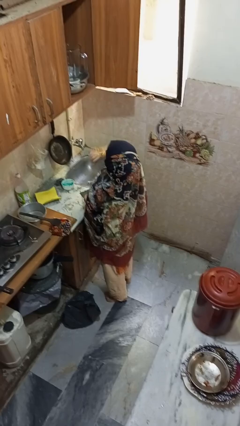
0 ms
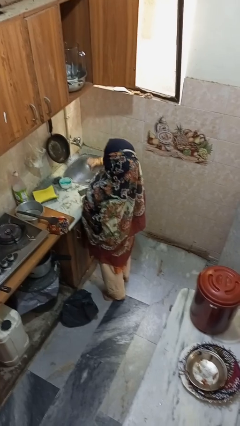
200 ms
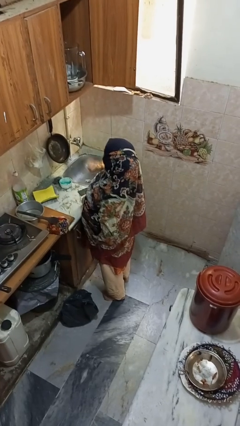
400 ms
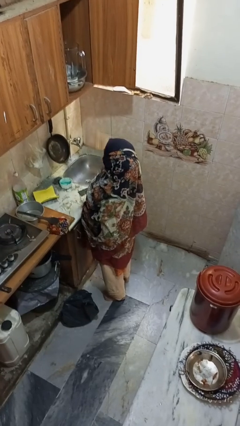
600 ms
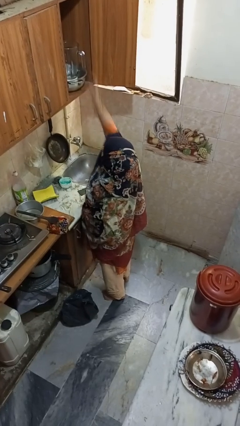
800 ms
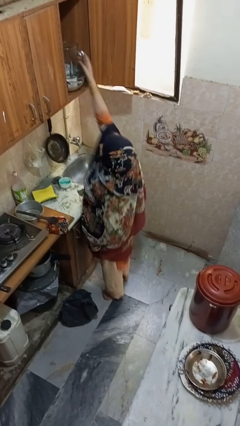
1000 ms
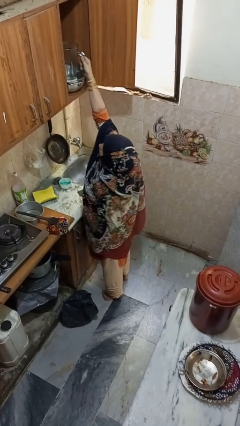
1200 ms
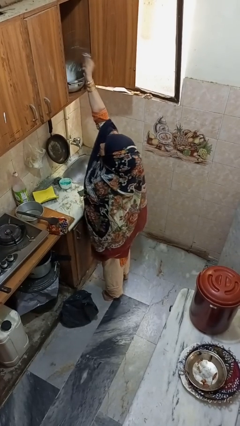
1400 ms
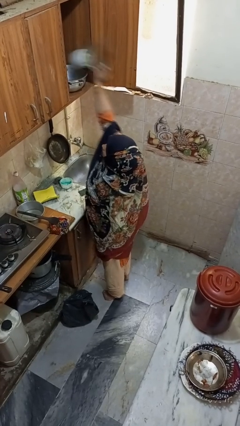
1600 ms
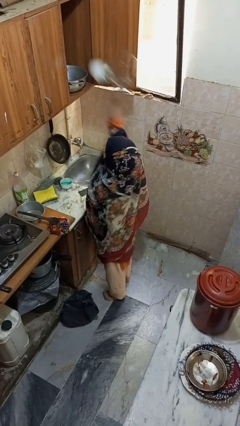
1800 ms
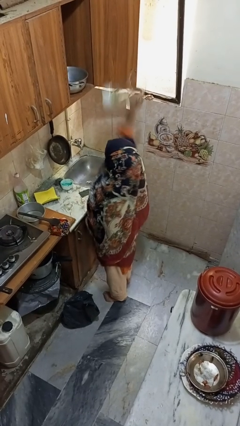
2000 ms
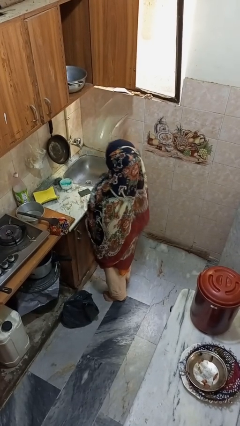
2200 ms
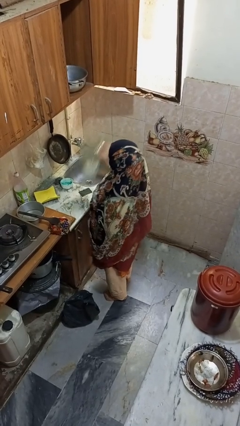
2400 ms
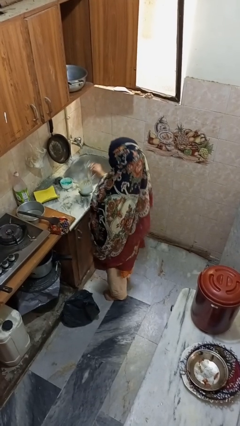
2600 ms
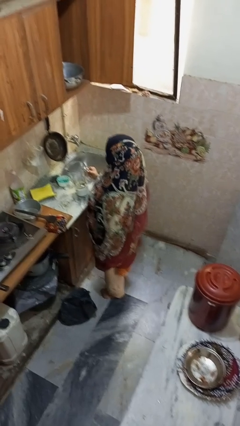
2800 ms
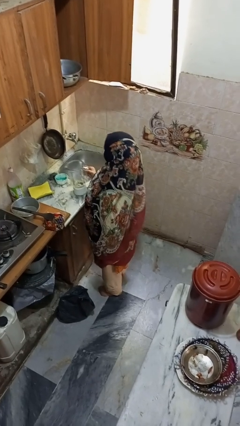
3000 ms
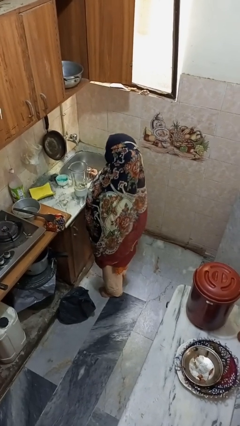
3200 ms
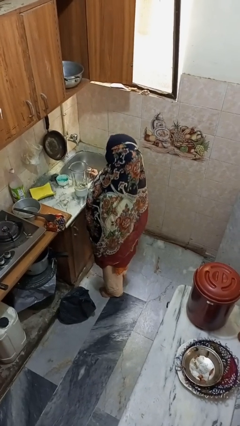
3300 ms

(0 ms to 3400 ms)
person puts object in cabinet

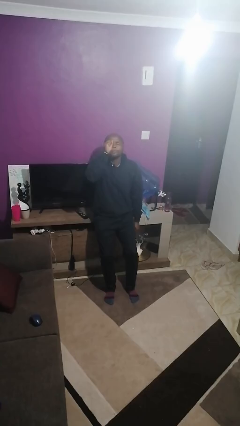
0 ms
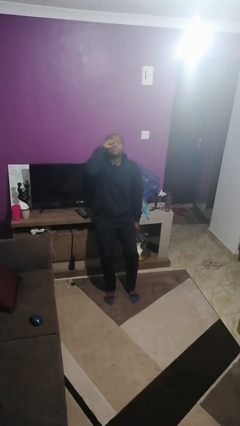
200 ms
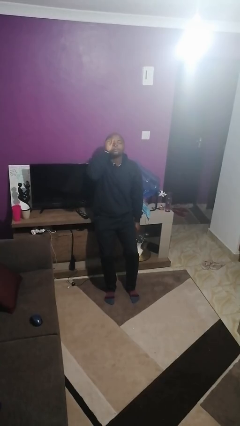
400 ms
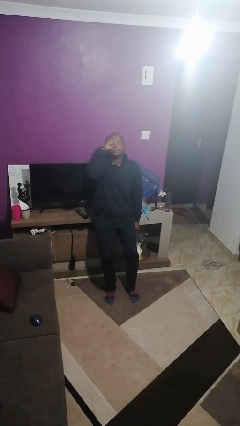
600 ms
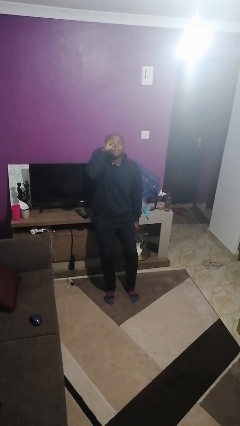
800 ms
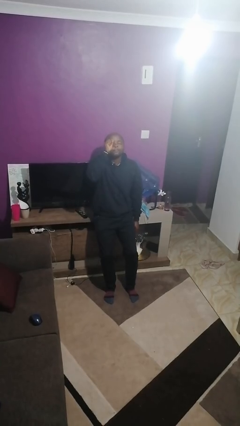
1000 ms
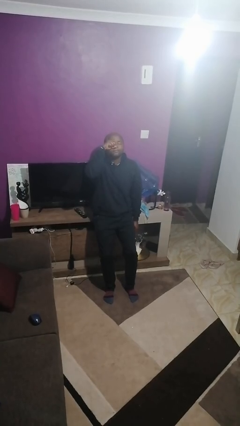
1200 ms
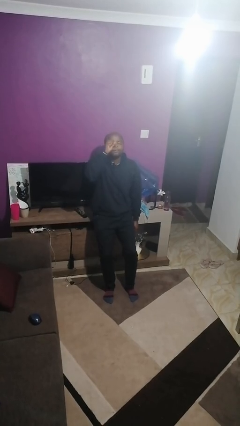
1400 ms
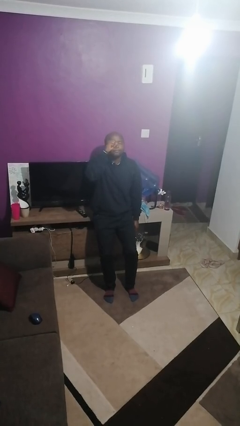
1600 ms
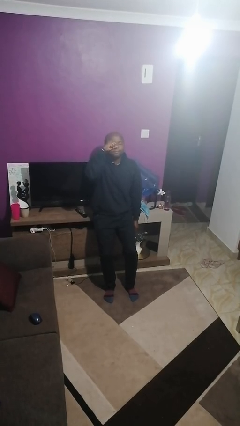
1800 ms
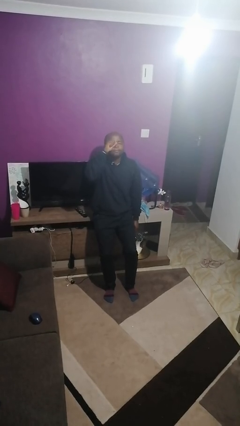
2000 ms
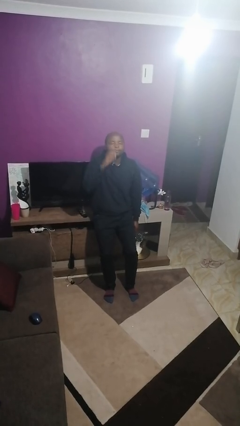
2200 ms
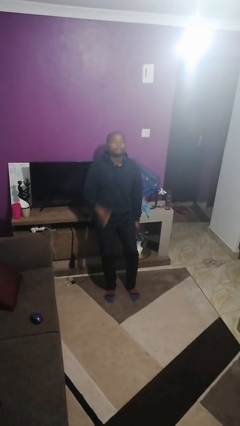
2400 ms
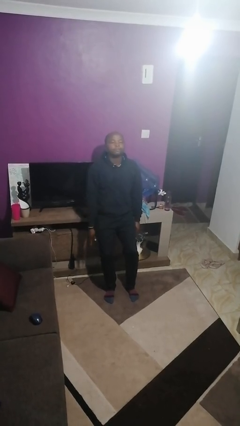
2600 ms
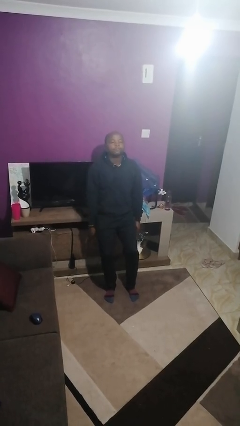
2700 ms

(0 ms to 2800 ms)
person rubs eyes

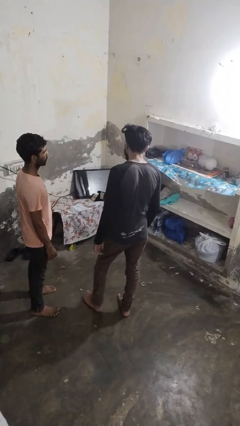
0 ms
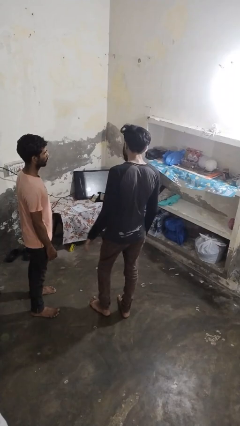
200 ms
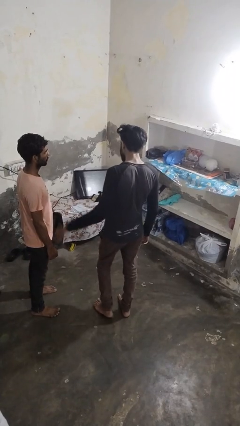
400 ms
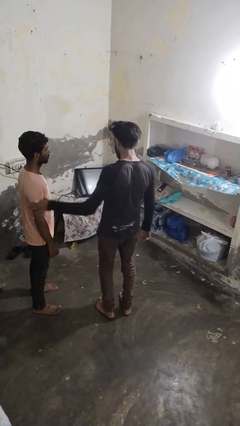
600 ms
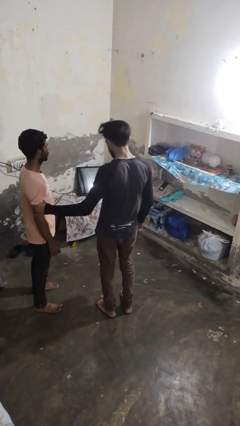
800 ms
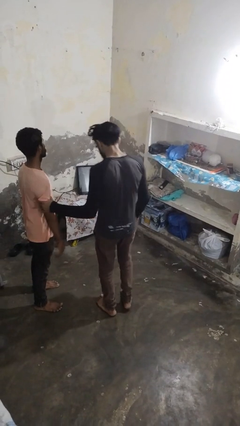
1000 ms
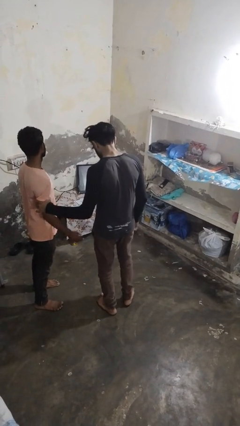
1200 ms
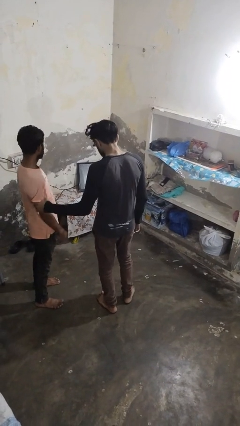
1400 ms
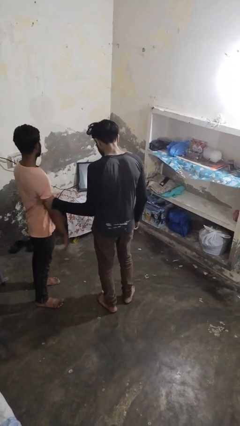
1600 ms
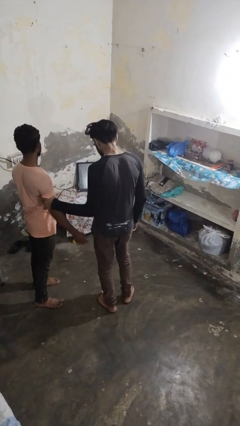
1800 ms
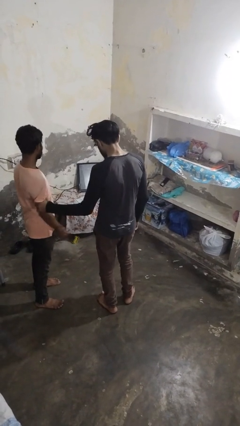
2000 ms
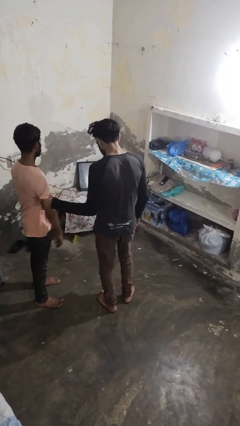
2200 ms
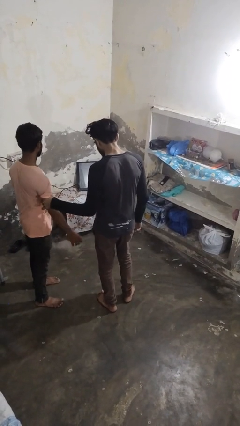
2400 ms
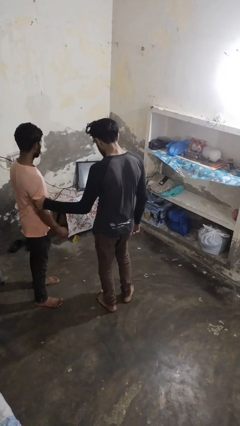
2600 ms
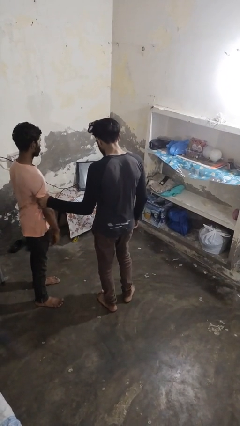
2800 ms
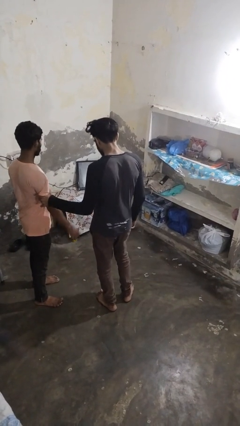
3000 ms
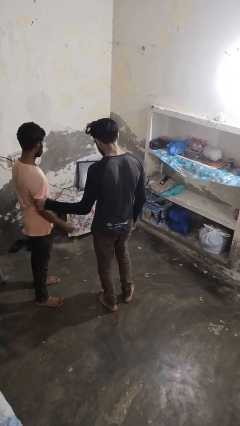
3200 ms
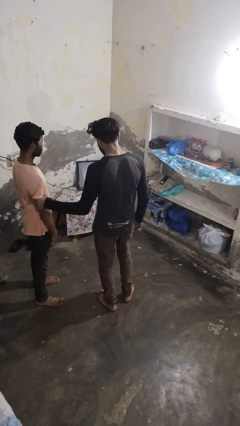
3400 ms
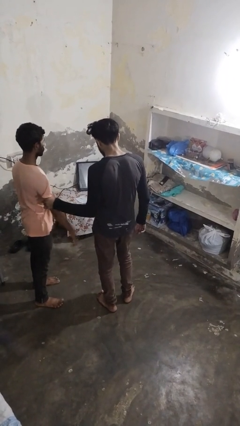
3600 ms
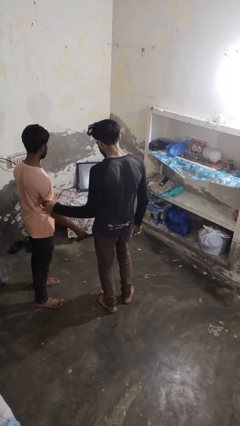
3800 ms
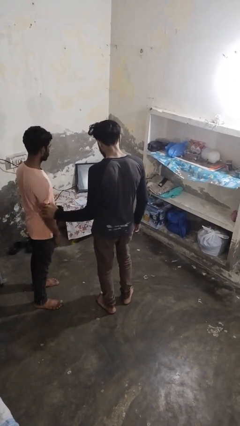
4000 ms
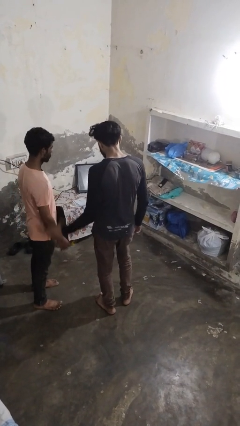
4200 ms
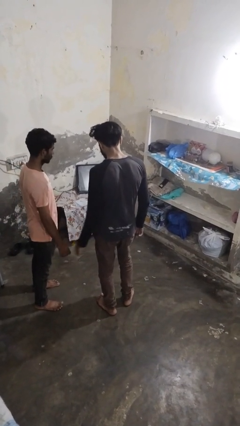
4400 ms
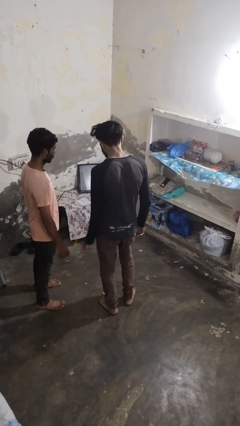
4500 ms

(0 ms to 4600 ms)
person grabs person by bicep

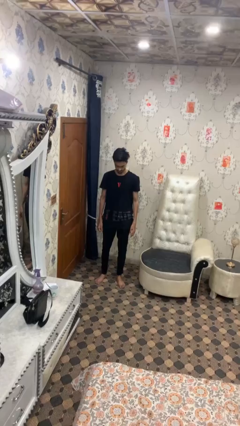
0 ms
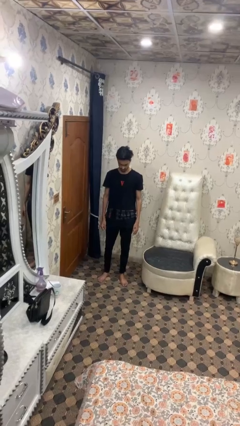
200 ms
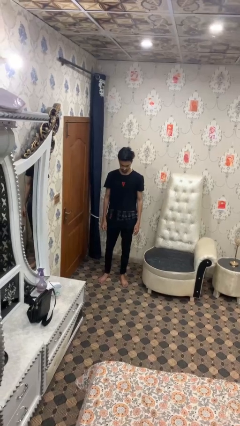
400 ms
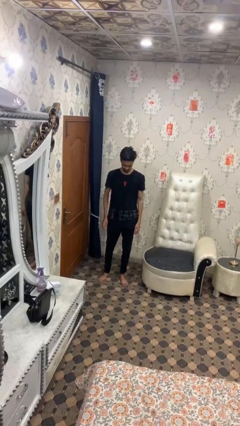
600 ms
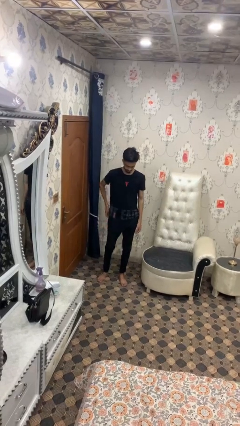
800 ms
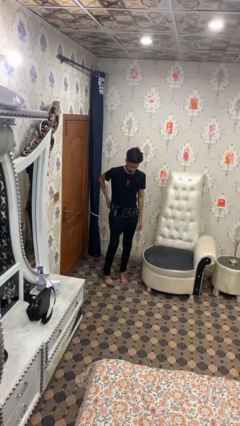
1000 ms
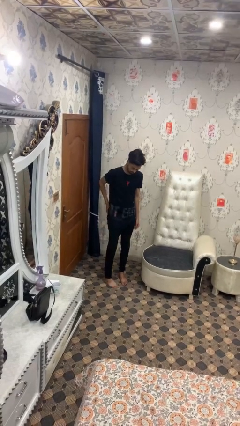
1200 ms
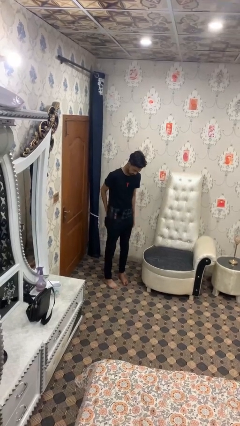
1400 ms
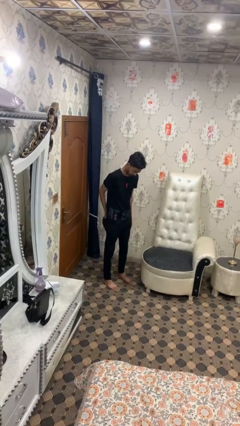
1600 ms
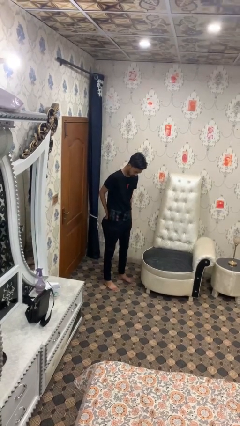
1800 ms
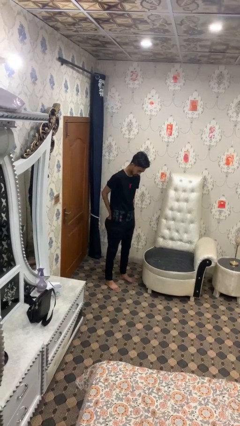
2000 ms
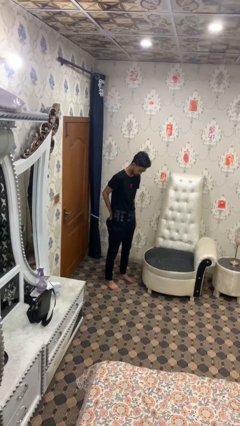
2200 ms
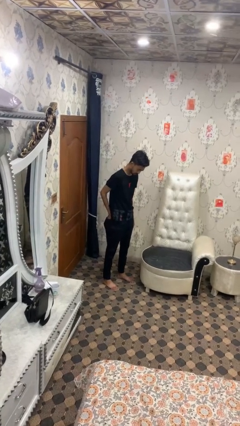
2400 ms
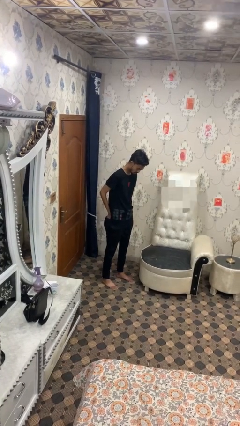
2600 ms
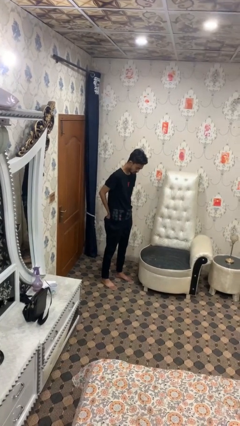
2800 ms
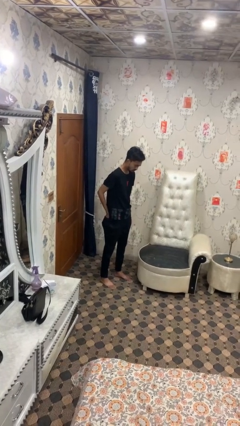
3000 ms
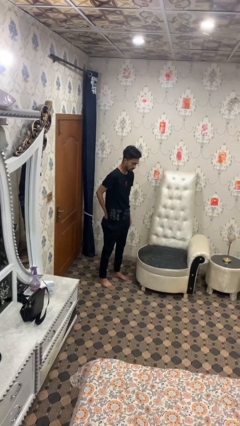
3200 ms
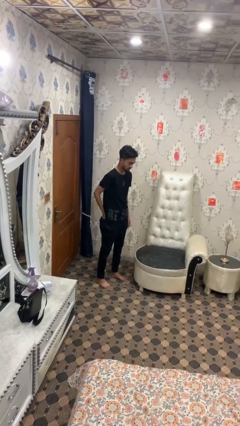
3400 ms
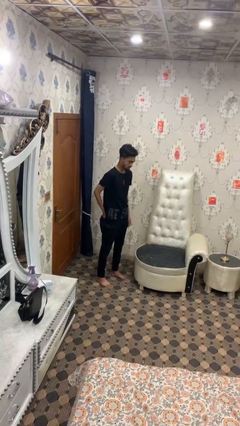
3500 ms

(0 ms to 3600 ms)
person puts hands in back pockets

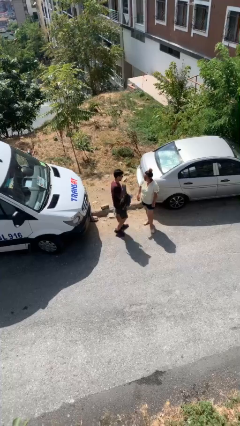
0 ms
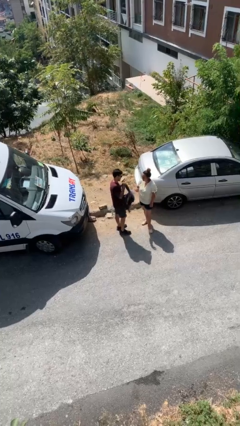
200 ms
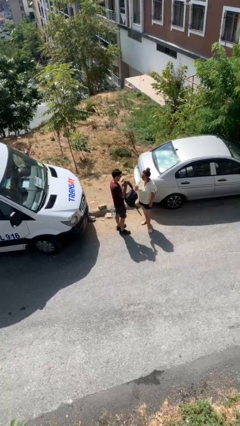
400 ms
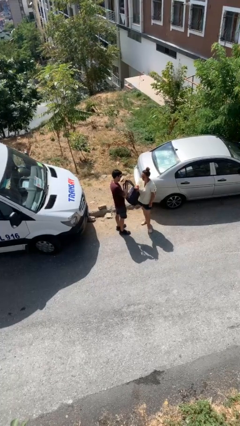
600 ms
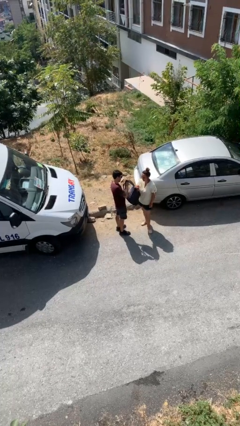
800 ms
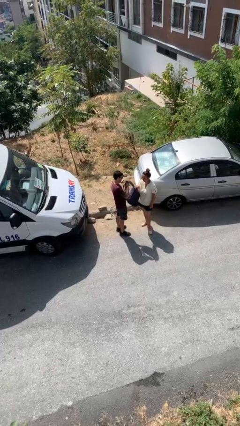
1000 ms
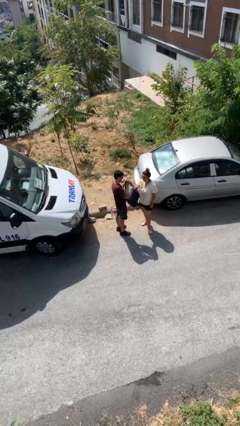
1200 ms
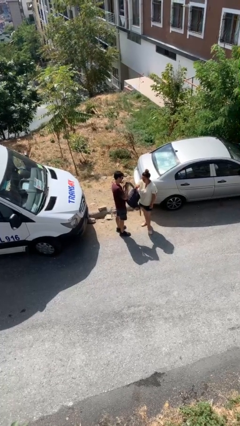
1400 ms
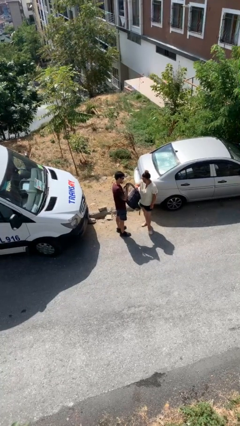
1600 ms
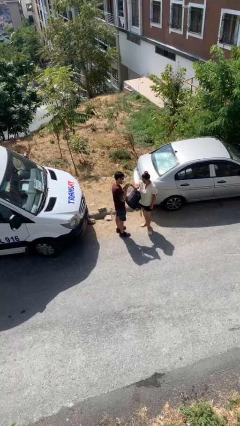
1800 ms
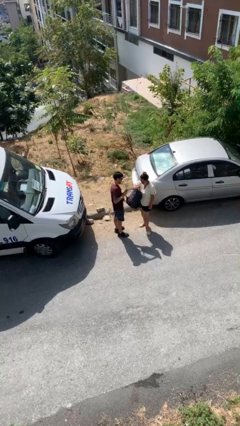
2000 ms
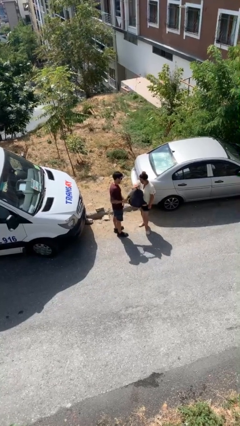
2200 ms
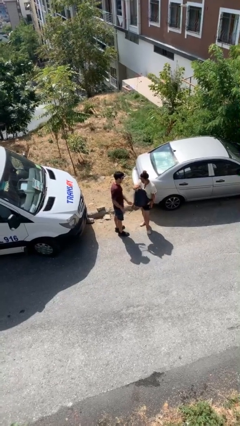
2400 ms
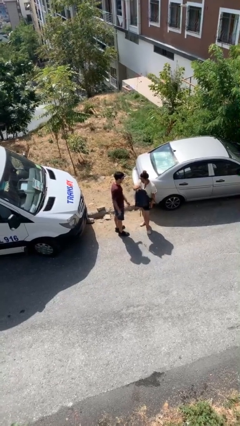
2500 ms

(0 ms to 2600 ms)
person transfers object to person

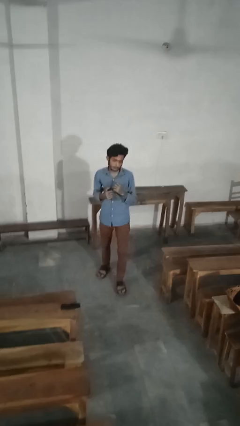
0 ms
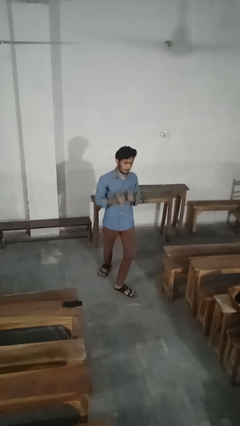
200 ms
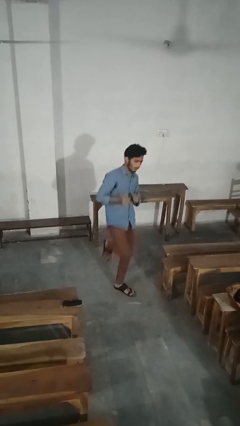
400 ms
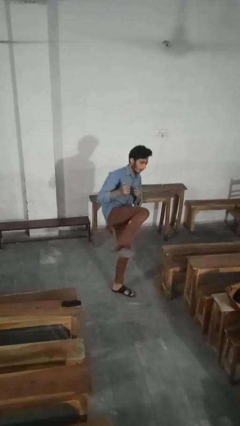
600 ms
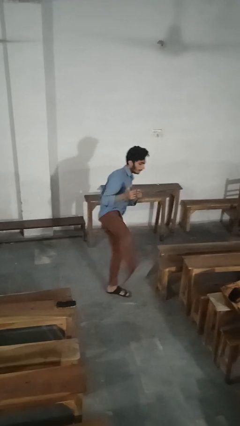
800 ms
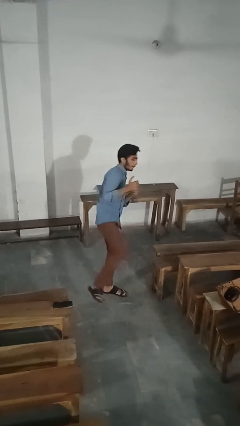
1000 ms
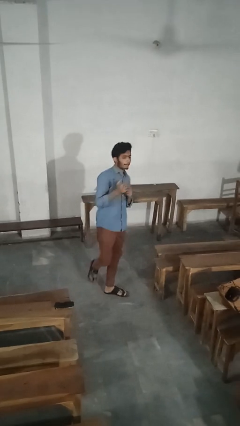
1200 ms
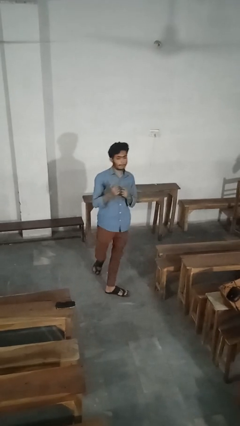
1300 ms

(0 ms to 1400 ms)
person karate kicks
